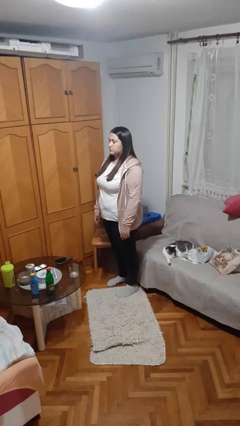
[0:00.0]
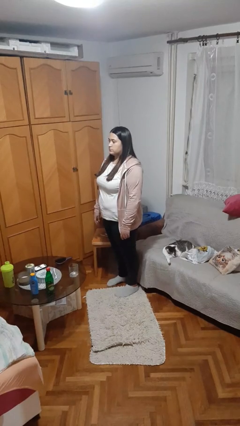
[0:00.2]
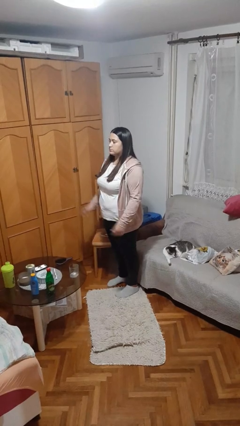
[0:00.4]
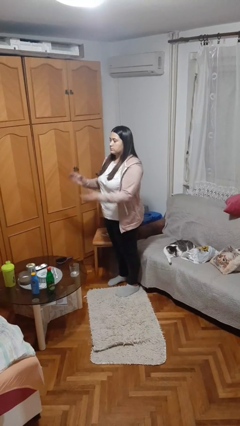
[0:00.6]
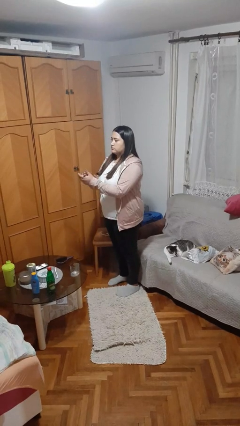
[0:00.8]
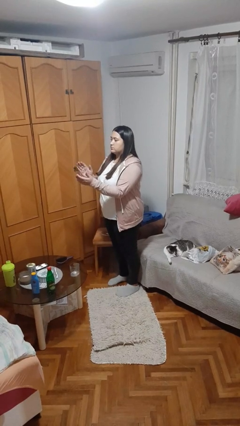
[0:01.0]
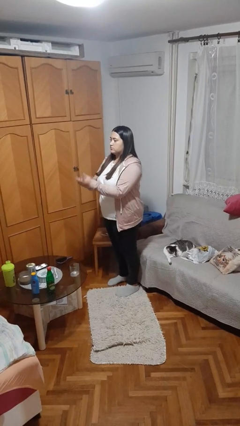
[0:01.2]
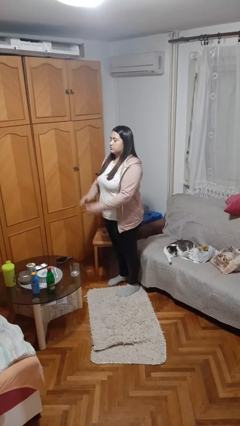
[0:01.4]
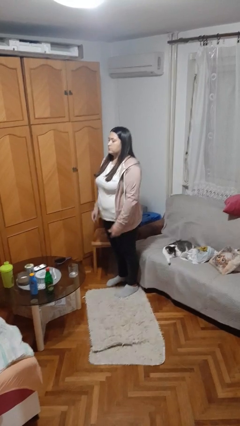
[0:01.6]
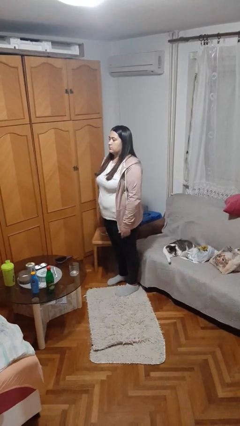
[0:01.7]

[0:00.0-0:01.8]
person claps hands

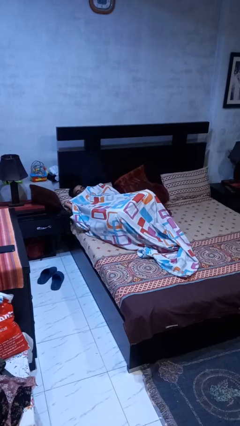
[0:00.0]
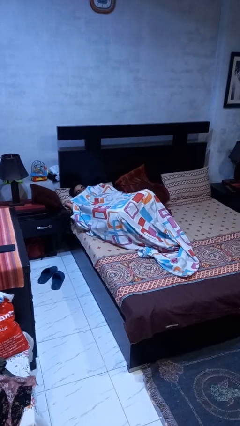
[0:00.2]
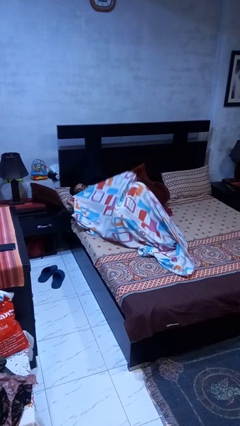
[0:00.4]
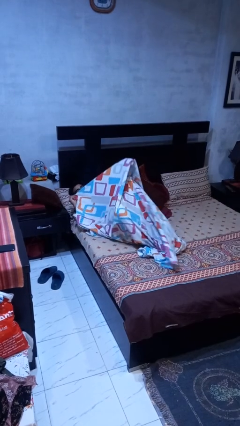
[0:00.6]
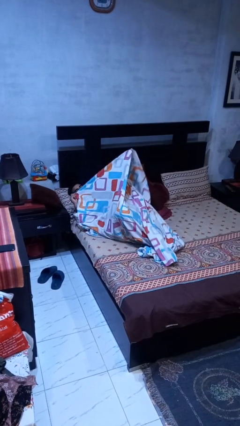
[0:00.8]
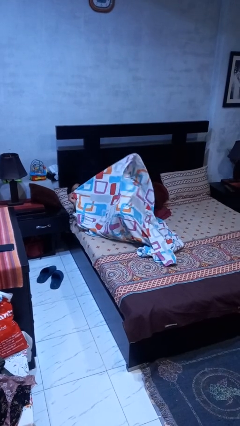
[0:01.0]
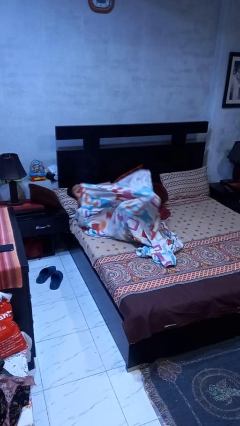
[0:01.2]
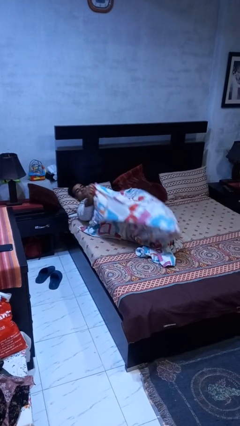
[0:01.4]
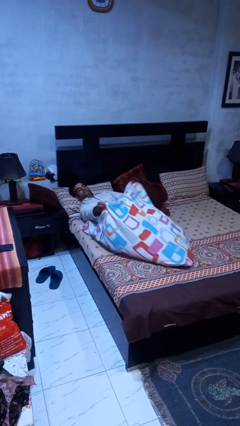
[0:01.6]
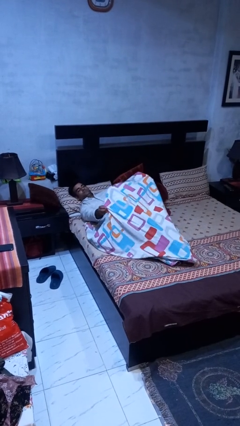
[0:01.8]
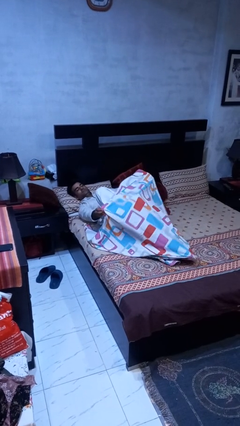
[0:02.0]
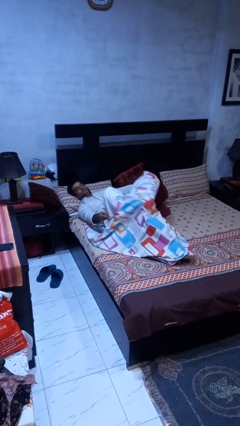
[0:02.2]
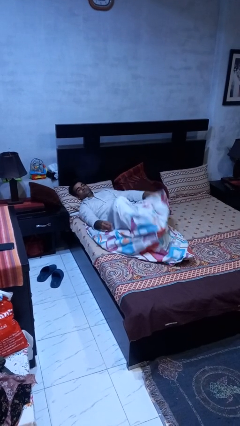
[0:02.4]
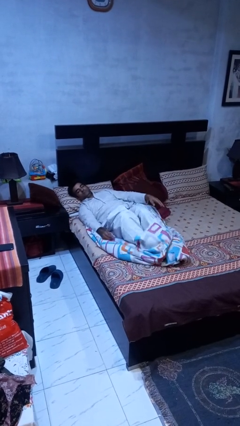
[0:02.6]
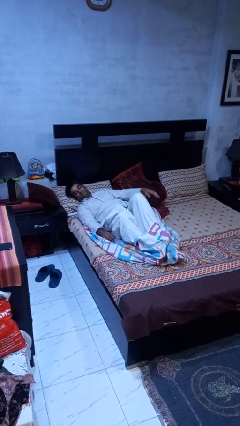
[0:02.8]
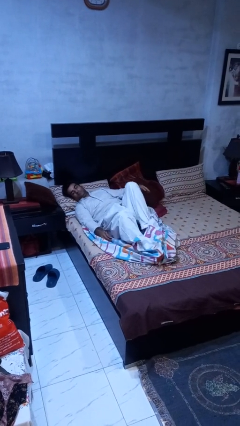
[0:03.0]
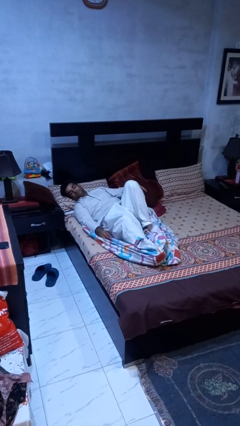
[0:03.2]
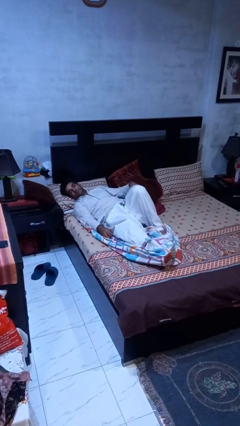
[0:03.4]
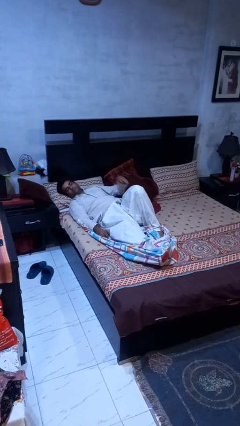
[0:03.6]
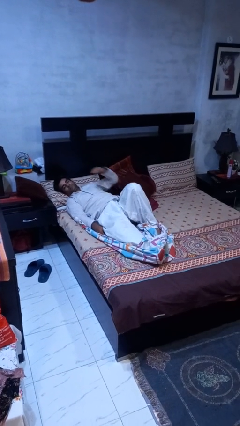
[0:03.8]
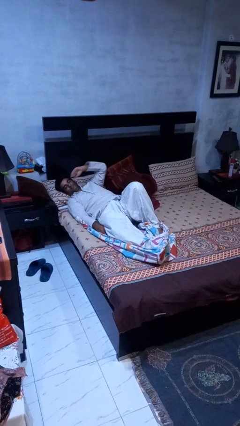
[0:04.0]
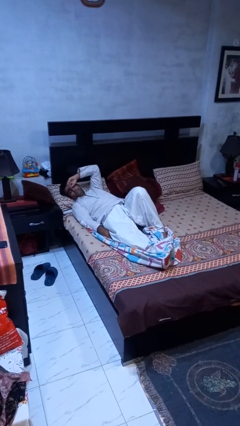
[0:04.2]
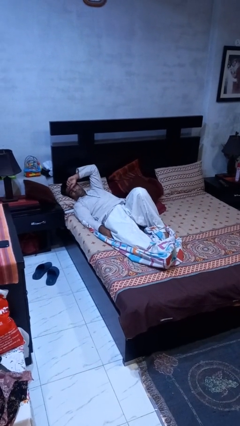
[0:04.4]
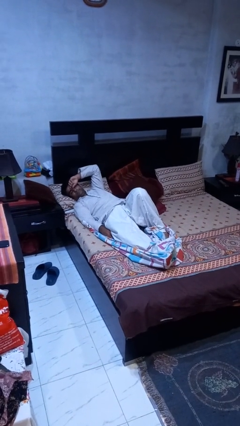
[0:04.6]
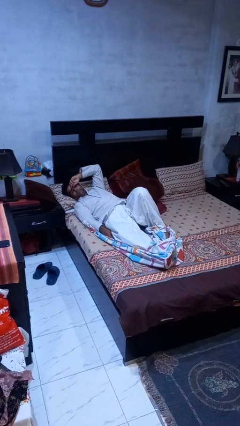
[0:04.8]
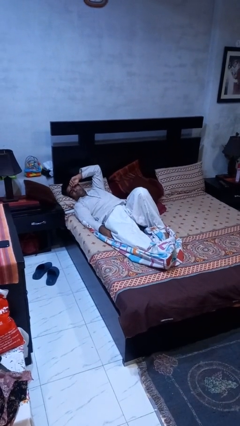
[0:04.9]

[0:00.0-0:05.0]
person uncovers with bedsheets

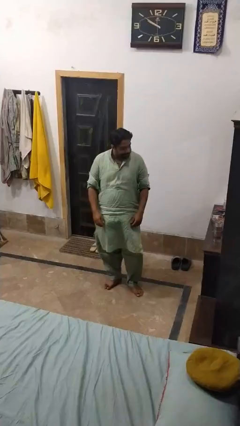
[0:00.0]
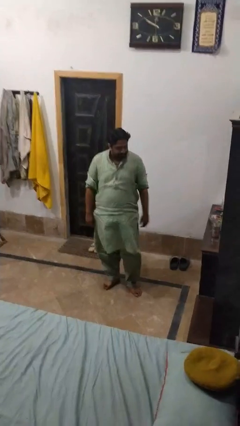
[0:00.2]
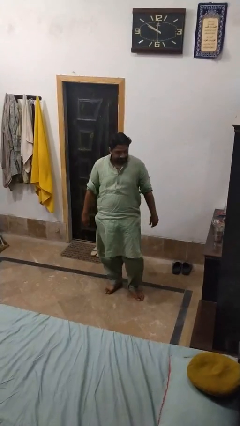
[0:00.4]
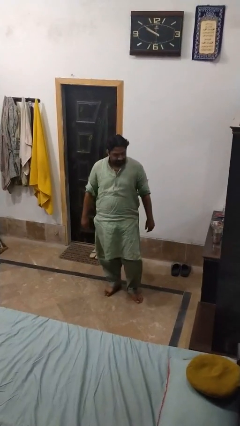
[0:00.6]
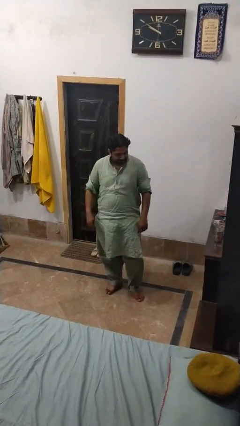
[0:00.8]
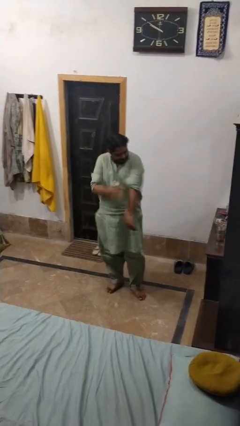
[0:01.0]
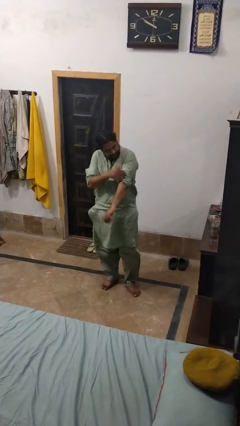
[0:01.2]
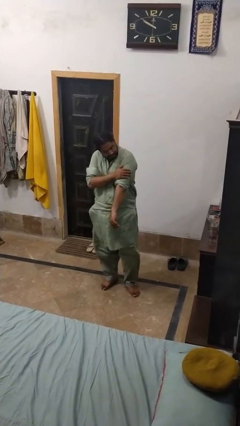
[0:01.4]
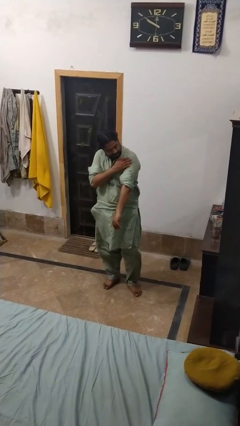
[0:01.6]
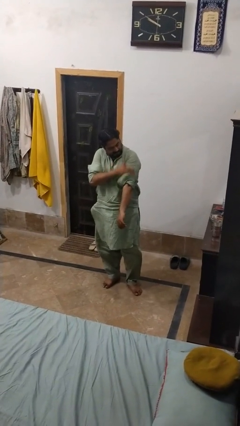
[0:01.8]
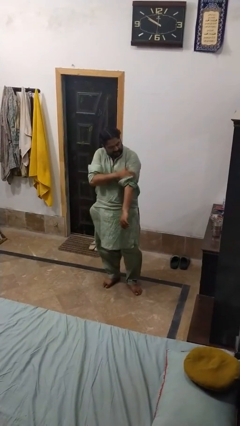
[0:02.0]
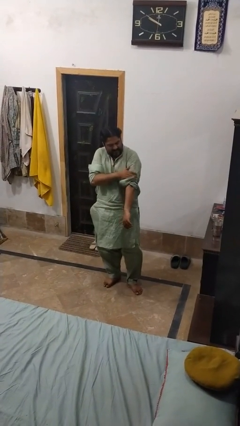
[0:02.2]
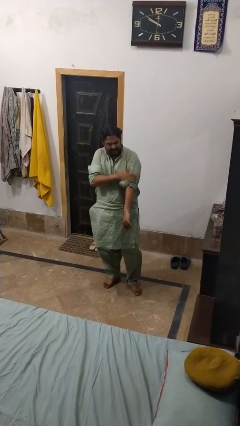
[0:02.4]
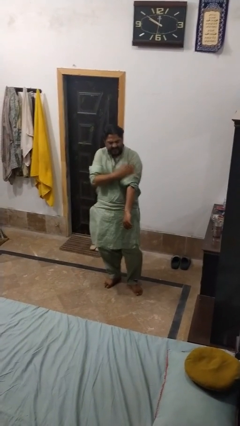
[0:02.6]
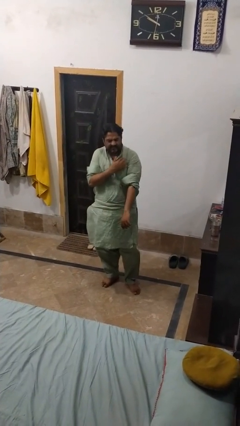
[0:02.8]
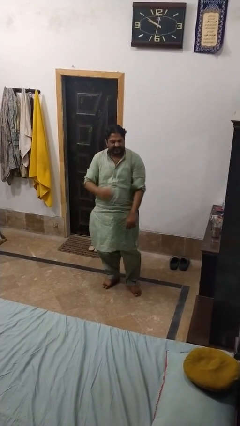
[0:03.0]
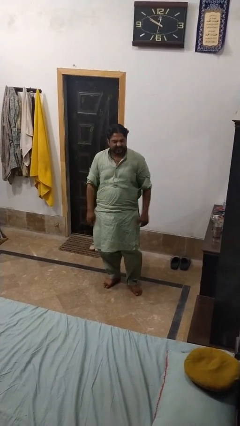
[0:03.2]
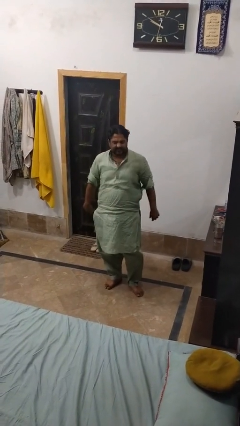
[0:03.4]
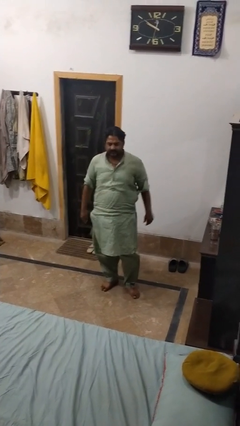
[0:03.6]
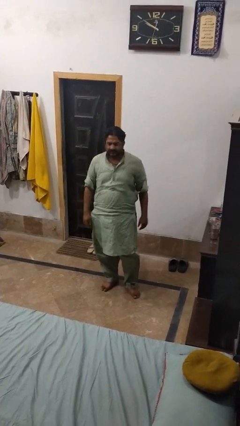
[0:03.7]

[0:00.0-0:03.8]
person swats bug

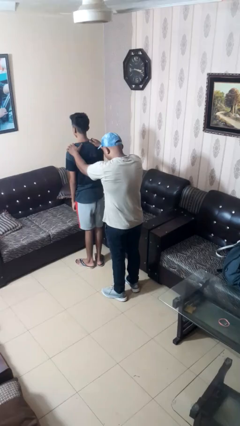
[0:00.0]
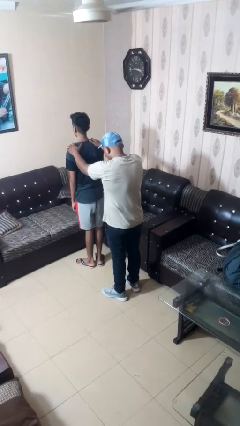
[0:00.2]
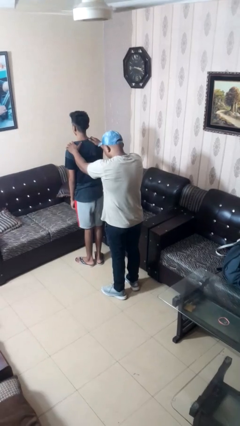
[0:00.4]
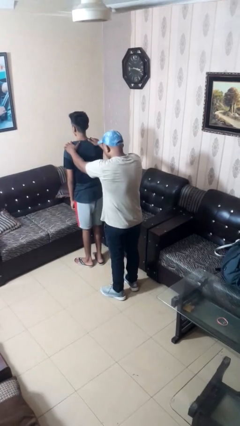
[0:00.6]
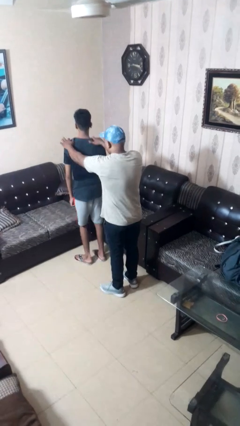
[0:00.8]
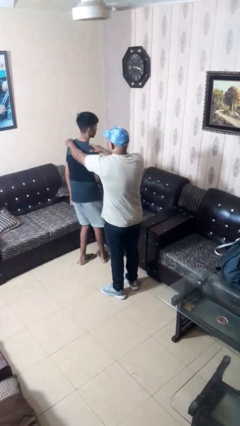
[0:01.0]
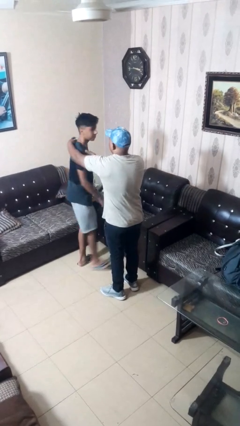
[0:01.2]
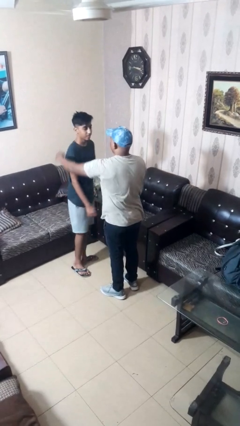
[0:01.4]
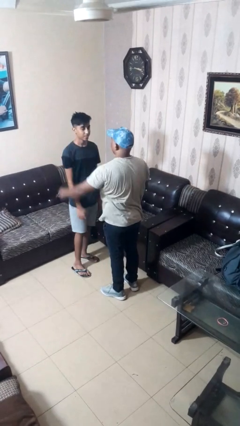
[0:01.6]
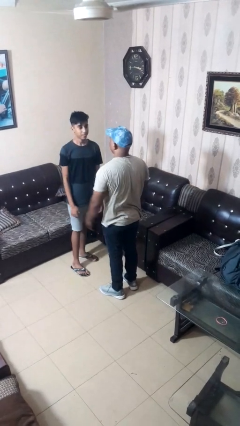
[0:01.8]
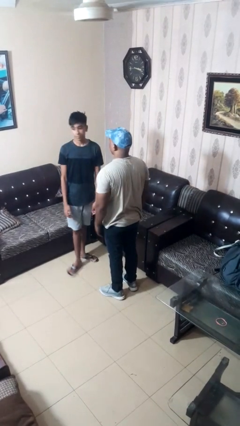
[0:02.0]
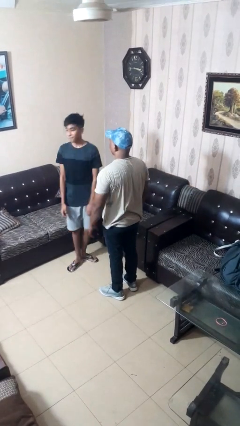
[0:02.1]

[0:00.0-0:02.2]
person spins person around

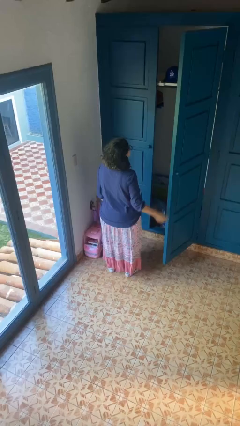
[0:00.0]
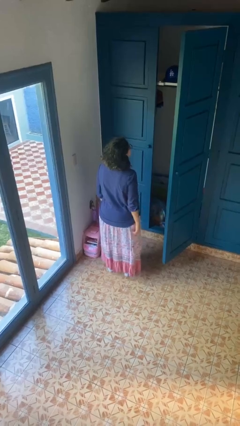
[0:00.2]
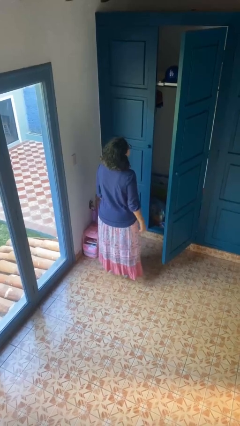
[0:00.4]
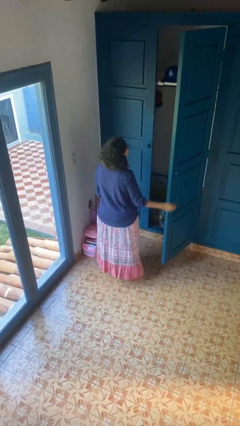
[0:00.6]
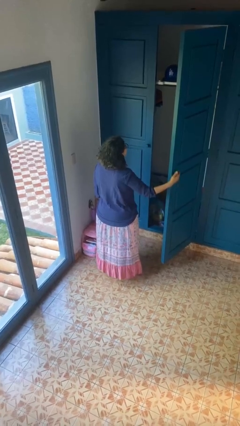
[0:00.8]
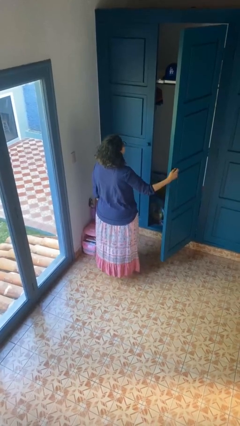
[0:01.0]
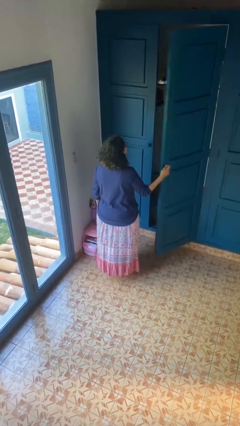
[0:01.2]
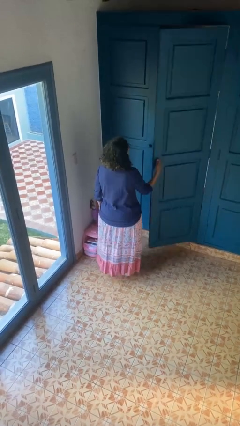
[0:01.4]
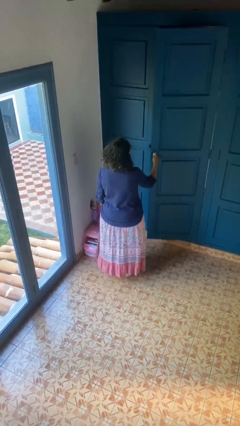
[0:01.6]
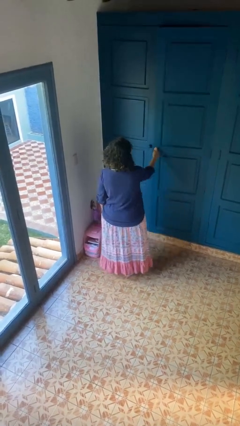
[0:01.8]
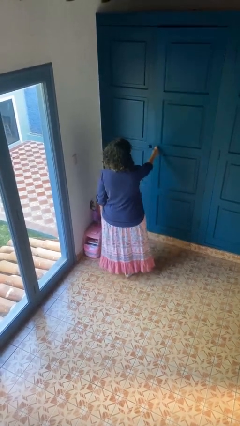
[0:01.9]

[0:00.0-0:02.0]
person closes closet door

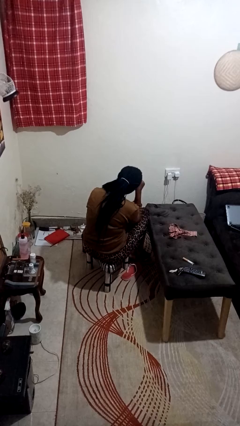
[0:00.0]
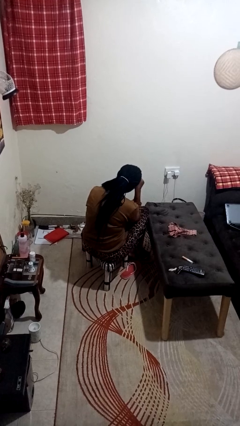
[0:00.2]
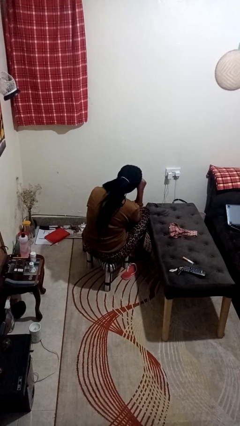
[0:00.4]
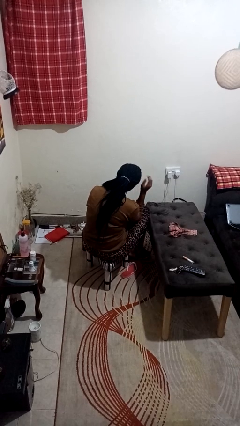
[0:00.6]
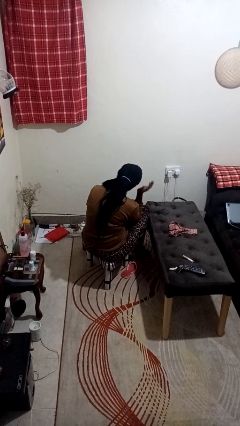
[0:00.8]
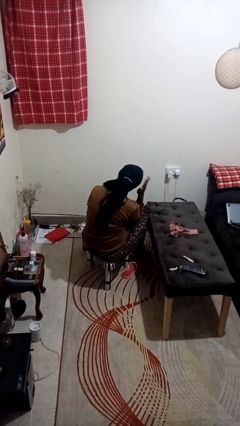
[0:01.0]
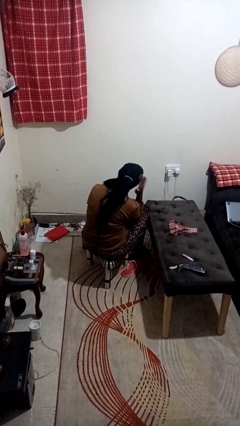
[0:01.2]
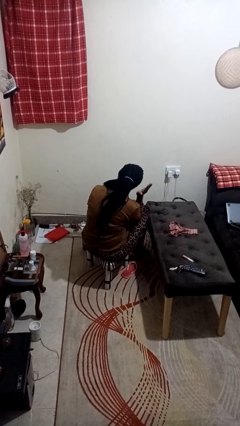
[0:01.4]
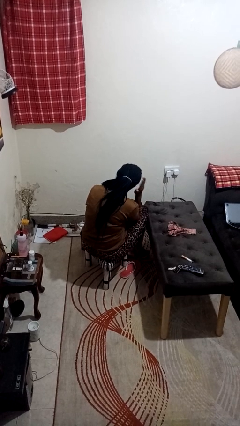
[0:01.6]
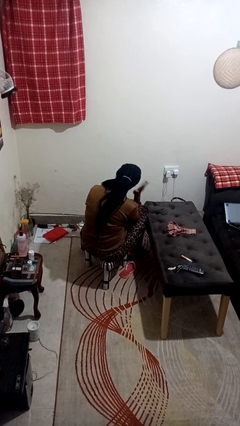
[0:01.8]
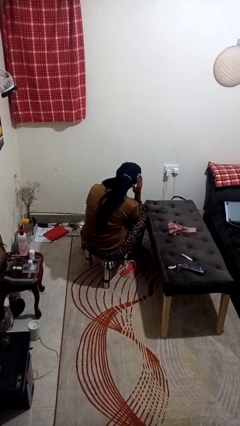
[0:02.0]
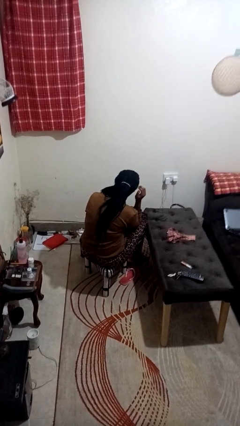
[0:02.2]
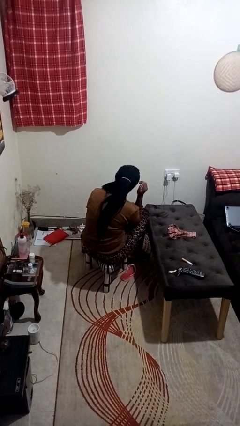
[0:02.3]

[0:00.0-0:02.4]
person pats head

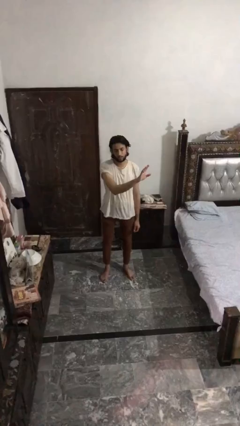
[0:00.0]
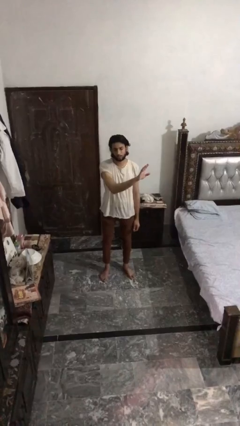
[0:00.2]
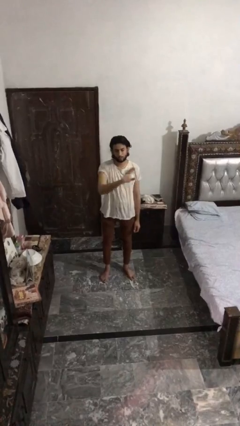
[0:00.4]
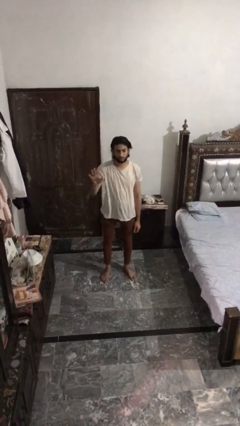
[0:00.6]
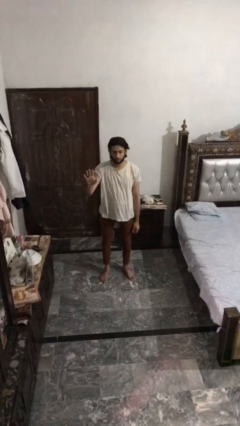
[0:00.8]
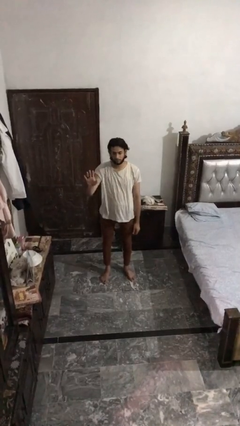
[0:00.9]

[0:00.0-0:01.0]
person gestures swipe right
